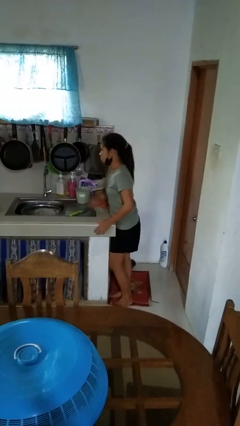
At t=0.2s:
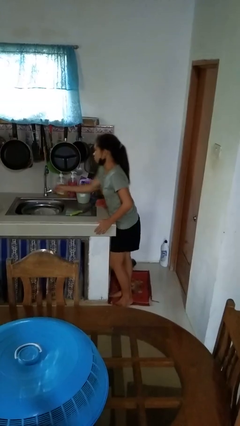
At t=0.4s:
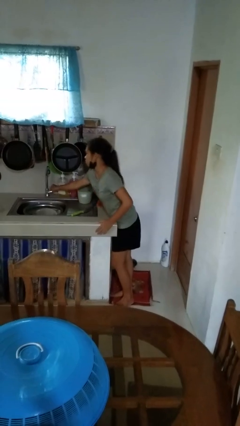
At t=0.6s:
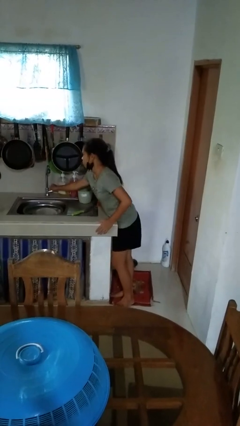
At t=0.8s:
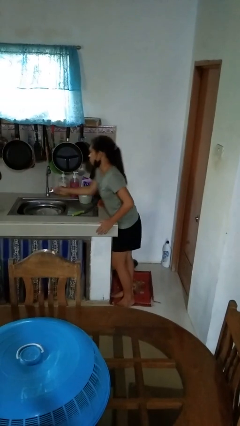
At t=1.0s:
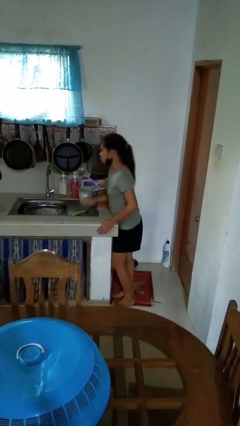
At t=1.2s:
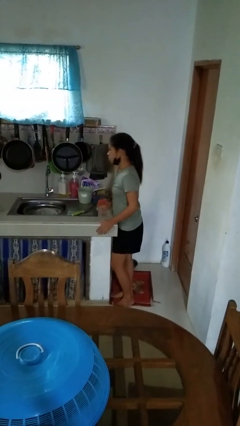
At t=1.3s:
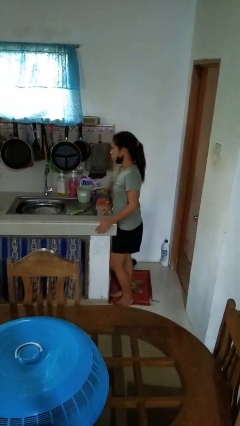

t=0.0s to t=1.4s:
person turns off faucet

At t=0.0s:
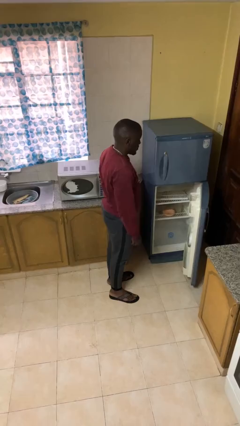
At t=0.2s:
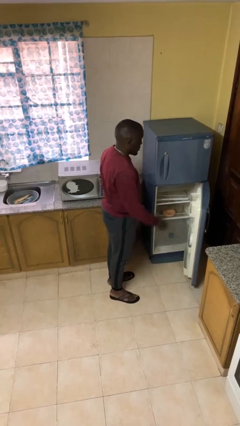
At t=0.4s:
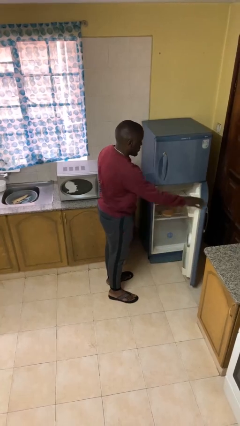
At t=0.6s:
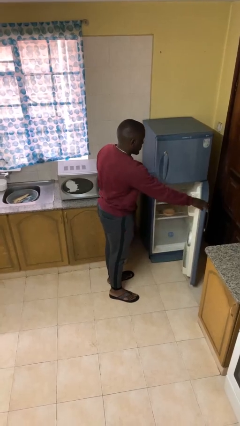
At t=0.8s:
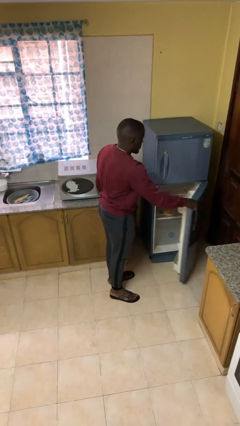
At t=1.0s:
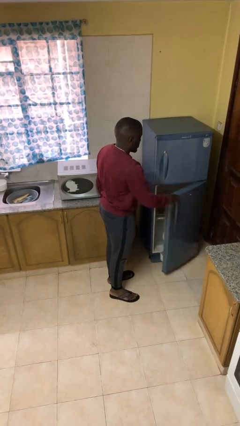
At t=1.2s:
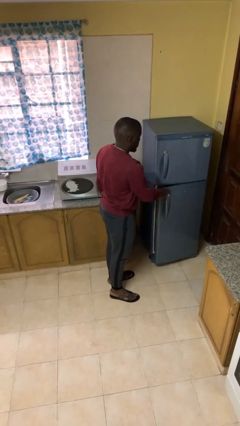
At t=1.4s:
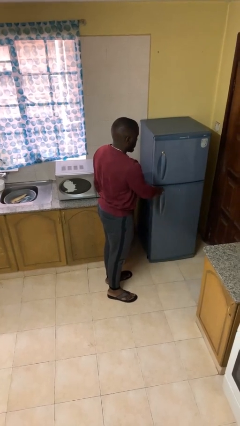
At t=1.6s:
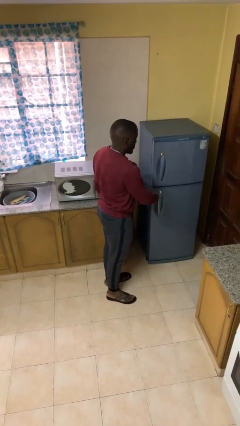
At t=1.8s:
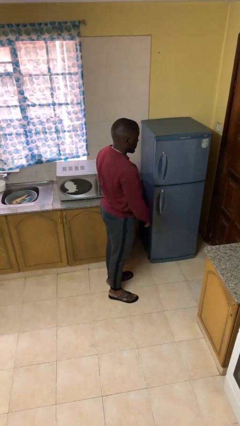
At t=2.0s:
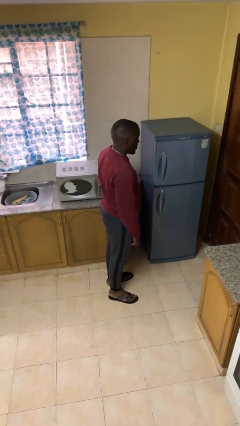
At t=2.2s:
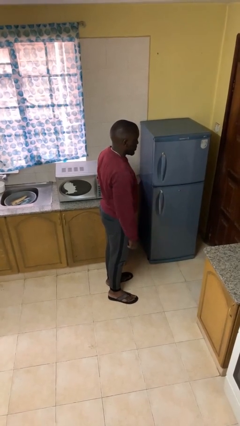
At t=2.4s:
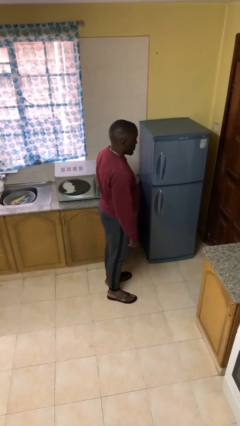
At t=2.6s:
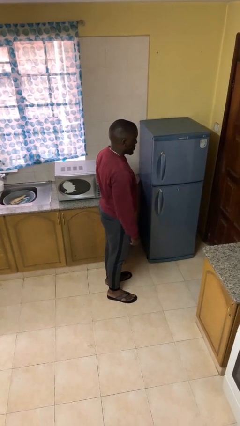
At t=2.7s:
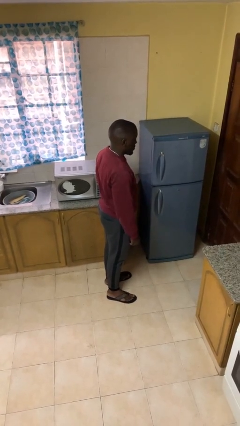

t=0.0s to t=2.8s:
person closes refrigerator

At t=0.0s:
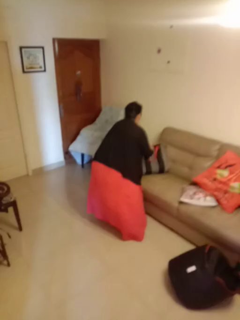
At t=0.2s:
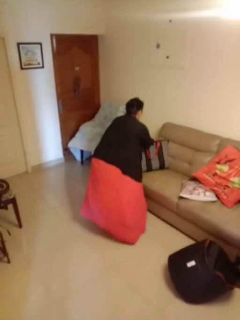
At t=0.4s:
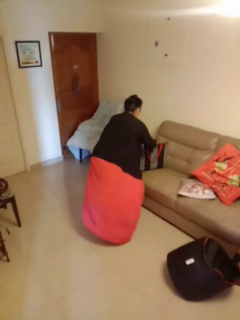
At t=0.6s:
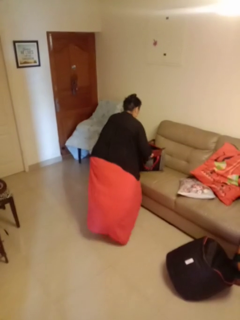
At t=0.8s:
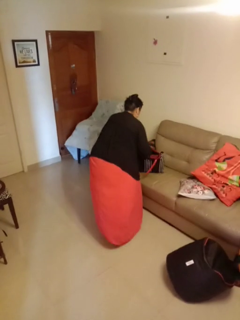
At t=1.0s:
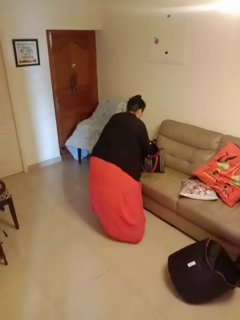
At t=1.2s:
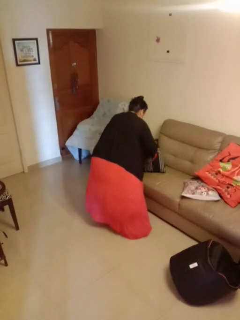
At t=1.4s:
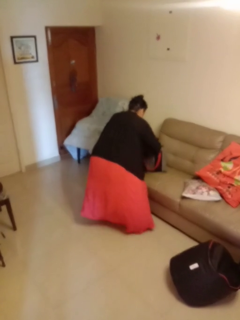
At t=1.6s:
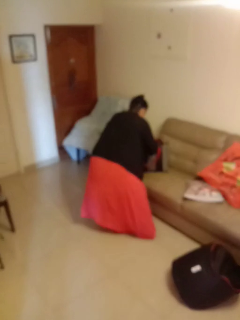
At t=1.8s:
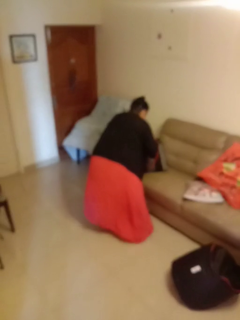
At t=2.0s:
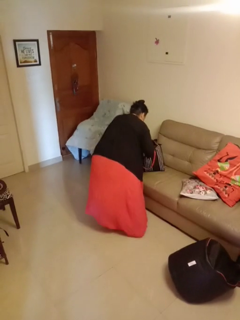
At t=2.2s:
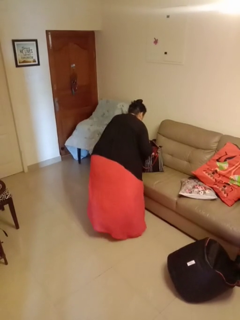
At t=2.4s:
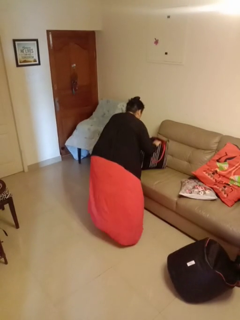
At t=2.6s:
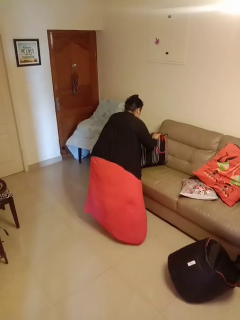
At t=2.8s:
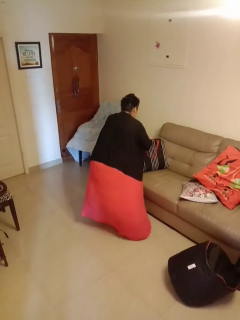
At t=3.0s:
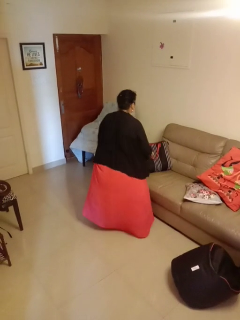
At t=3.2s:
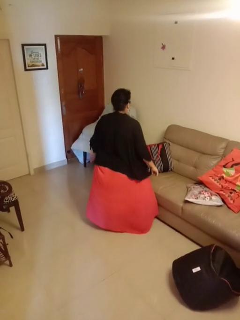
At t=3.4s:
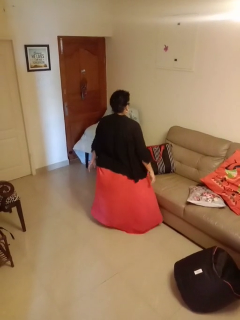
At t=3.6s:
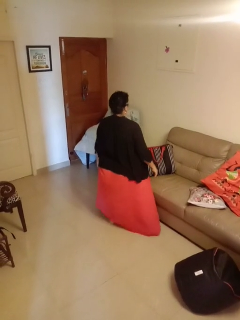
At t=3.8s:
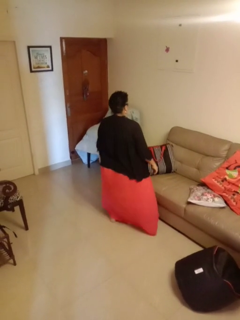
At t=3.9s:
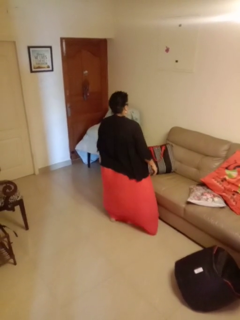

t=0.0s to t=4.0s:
person searches in bag

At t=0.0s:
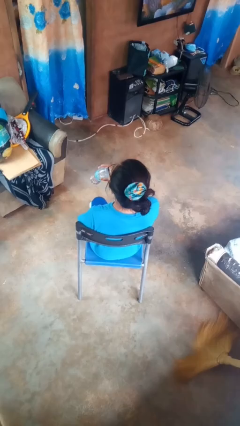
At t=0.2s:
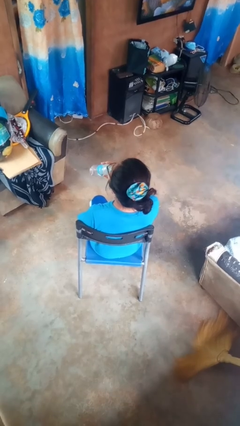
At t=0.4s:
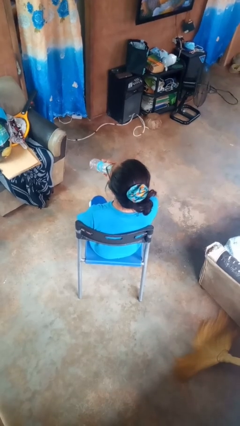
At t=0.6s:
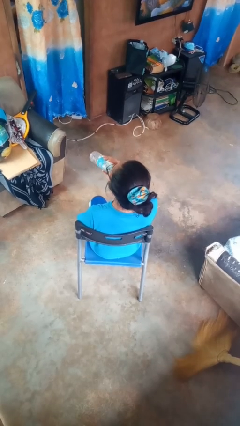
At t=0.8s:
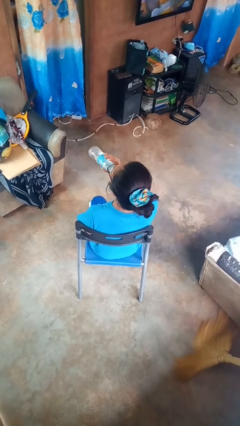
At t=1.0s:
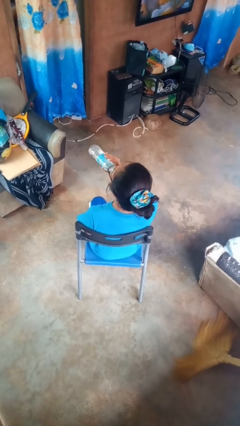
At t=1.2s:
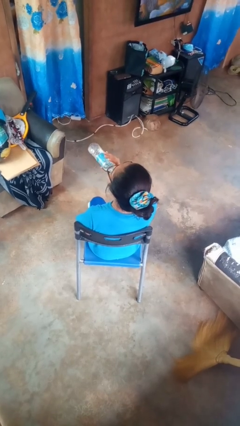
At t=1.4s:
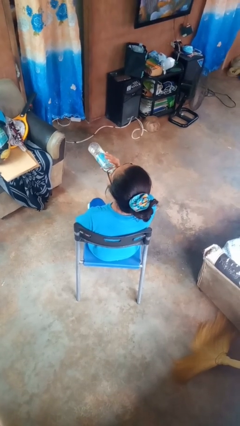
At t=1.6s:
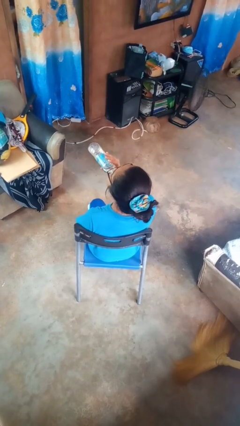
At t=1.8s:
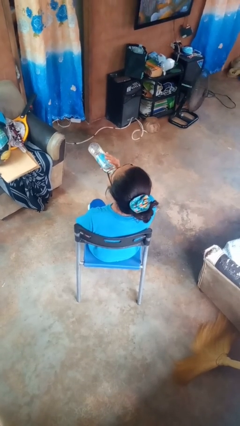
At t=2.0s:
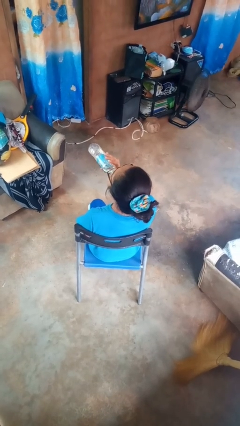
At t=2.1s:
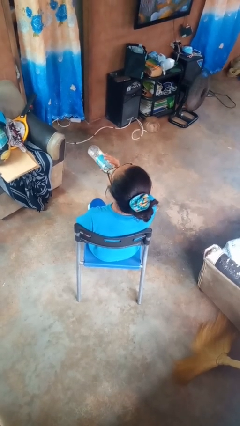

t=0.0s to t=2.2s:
person drinks from bottle

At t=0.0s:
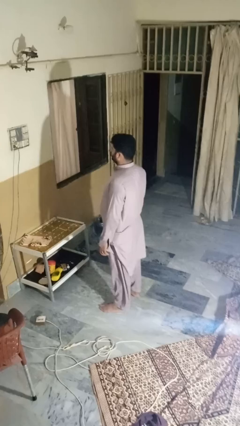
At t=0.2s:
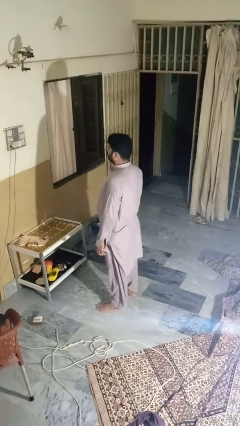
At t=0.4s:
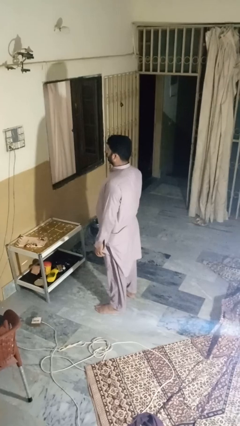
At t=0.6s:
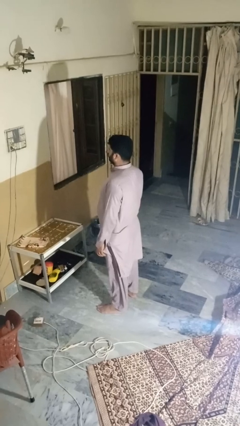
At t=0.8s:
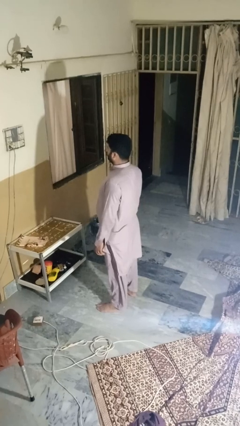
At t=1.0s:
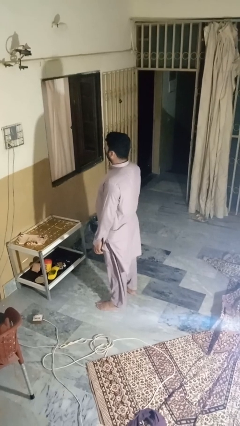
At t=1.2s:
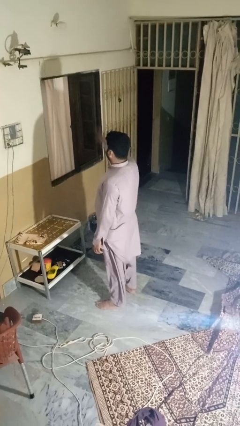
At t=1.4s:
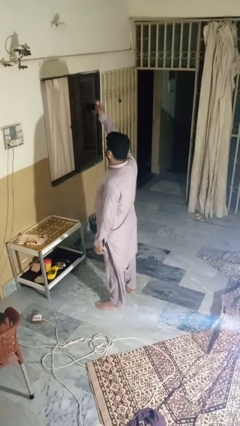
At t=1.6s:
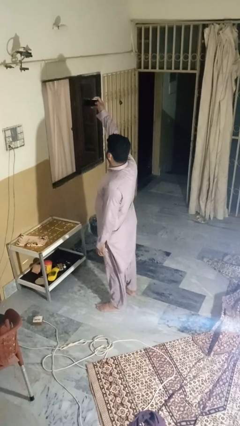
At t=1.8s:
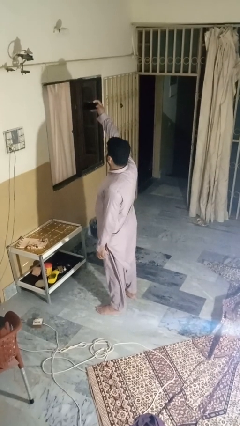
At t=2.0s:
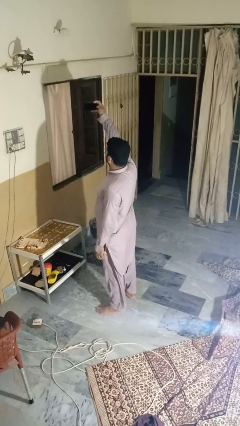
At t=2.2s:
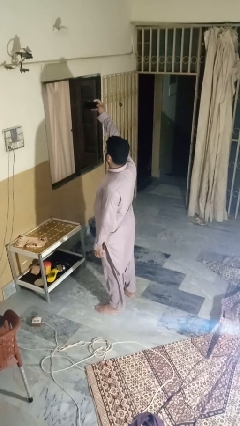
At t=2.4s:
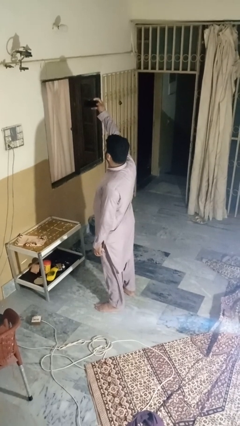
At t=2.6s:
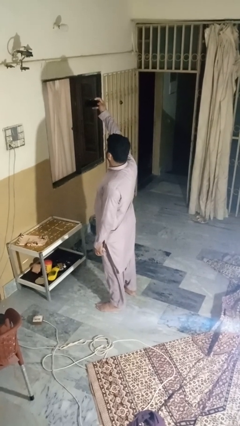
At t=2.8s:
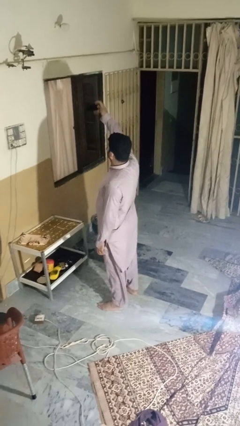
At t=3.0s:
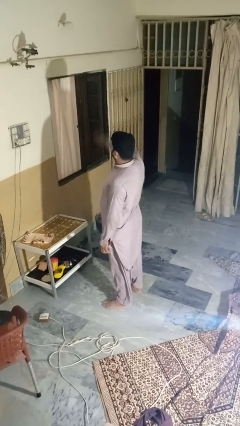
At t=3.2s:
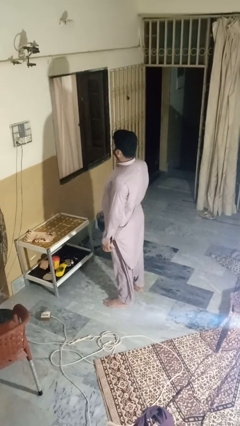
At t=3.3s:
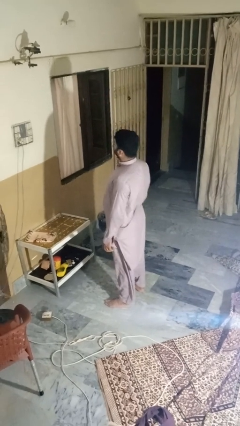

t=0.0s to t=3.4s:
person takes selfie

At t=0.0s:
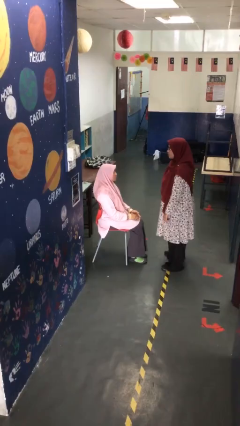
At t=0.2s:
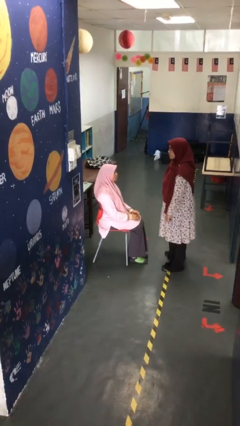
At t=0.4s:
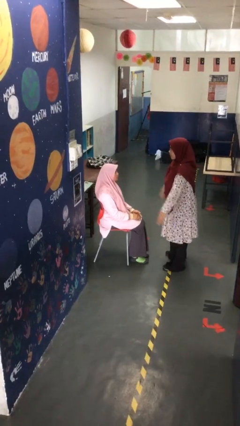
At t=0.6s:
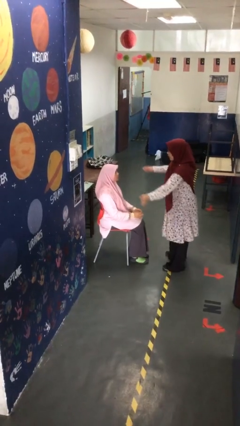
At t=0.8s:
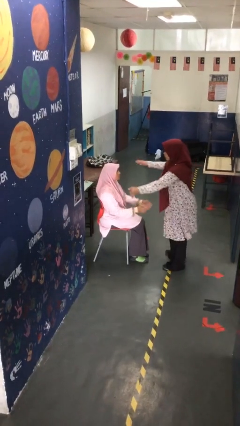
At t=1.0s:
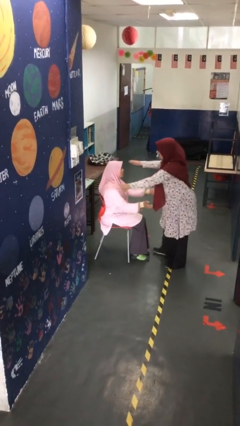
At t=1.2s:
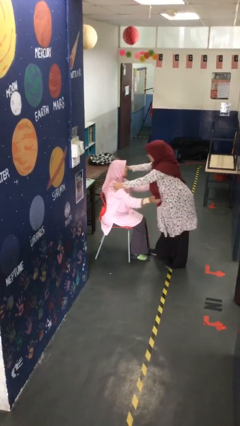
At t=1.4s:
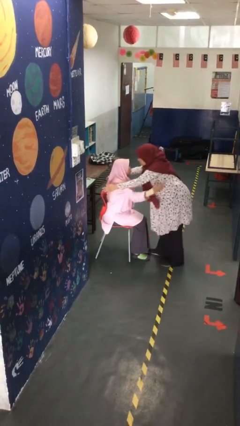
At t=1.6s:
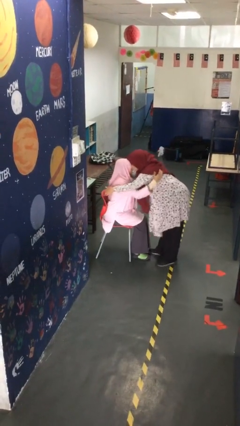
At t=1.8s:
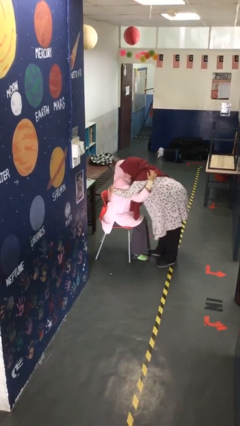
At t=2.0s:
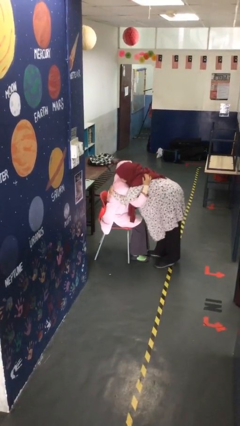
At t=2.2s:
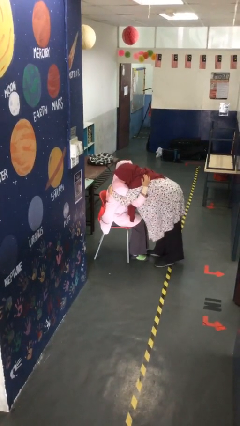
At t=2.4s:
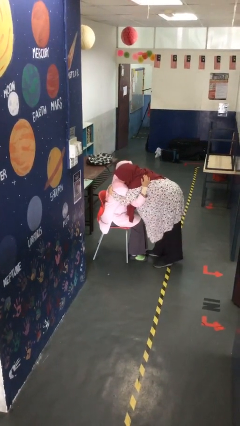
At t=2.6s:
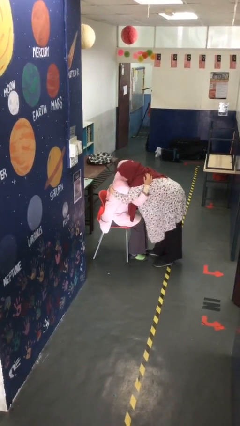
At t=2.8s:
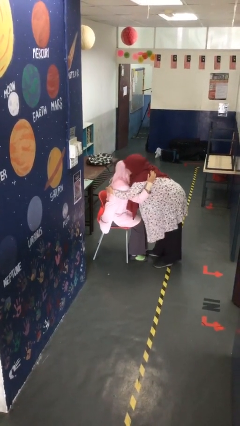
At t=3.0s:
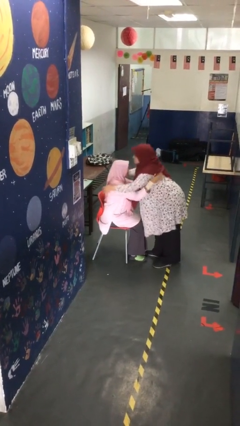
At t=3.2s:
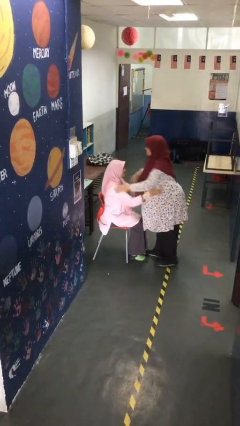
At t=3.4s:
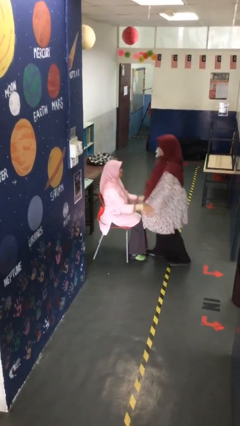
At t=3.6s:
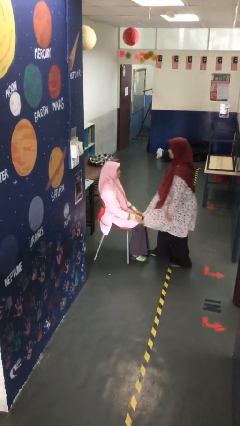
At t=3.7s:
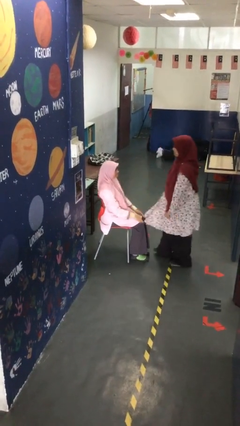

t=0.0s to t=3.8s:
person embraces person

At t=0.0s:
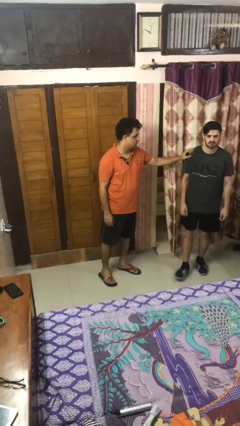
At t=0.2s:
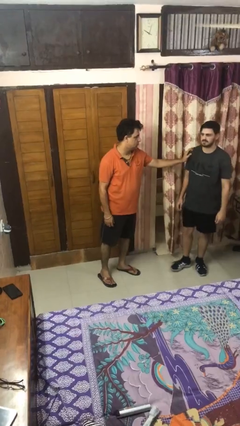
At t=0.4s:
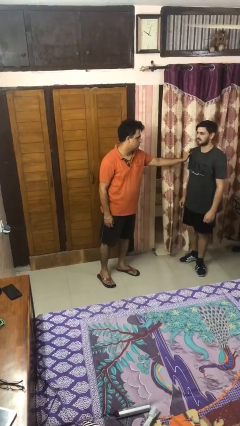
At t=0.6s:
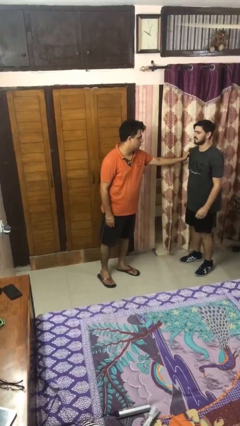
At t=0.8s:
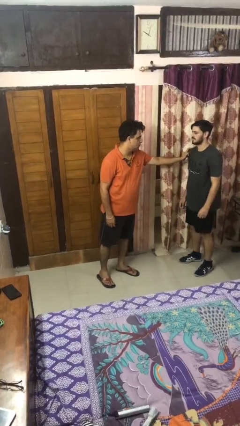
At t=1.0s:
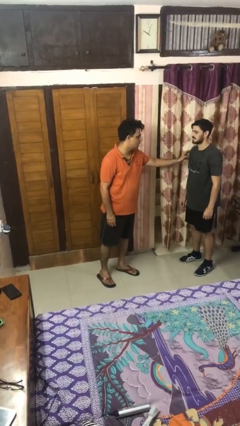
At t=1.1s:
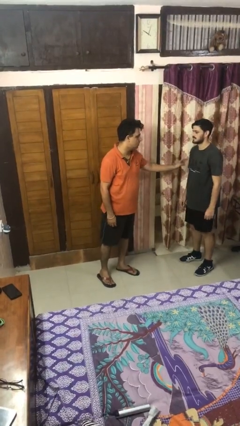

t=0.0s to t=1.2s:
person spins person around
